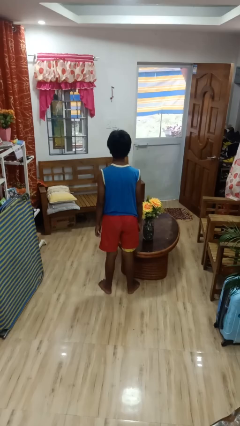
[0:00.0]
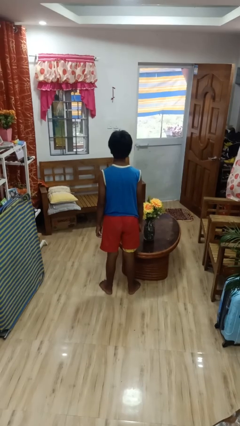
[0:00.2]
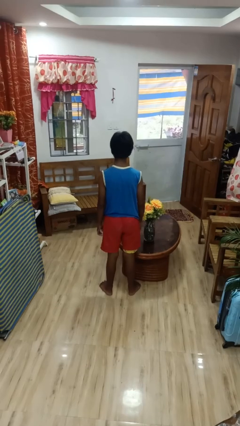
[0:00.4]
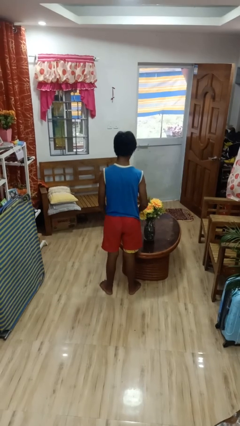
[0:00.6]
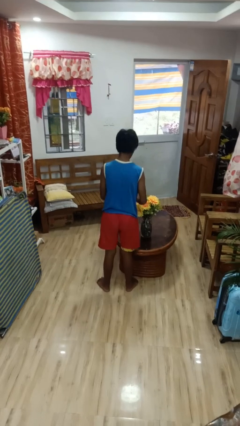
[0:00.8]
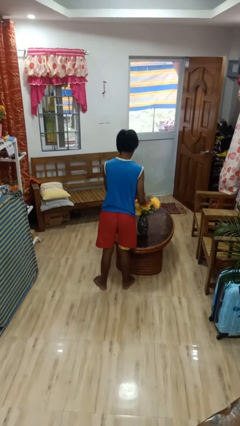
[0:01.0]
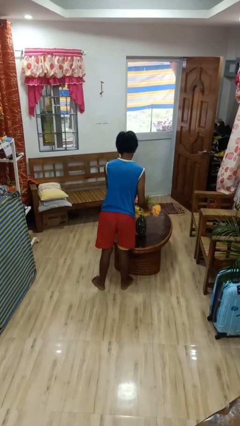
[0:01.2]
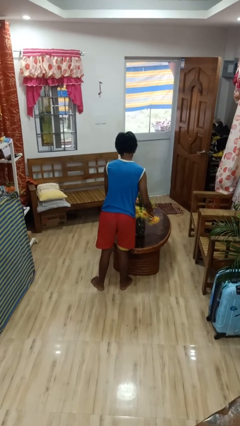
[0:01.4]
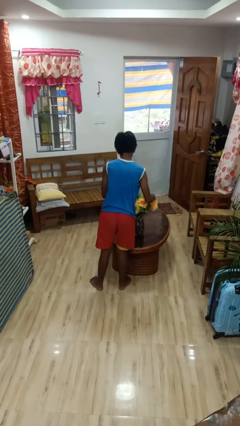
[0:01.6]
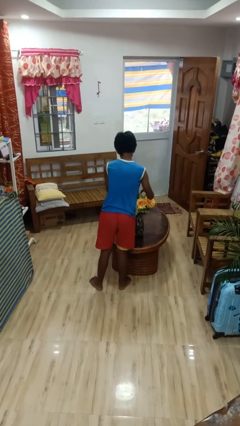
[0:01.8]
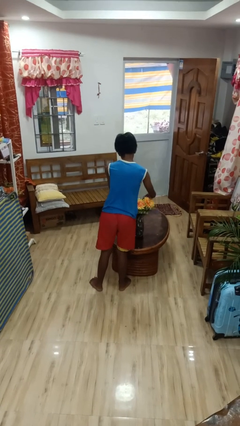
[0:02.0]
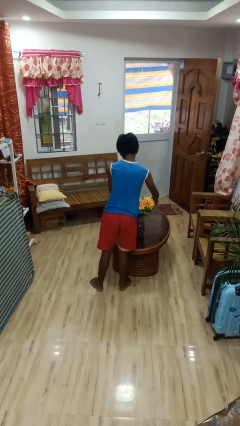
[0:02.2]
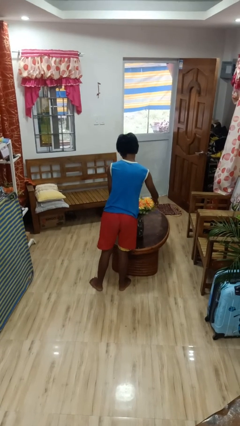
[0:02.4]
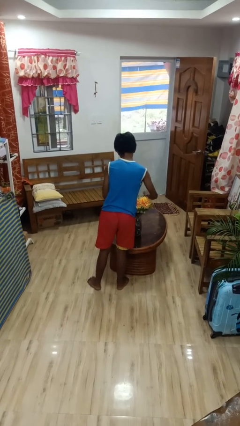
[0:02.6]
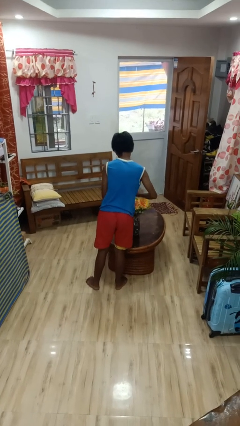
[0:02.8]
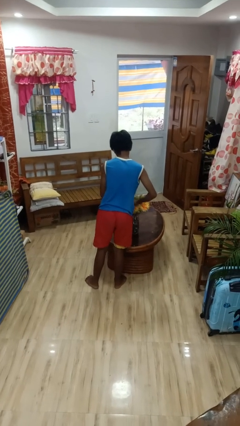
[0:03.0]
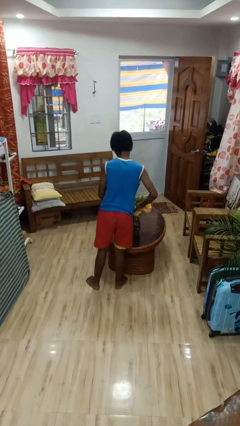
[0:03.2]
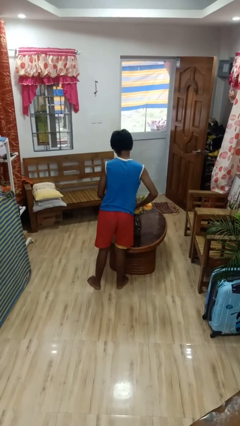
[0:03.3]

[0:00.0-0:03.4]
person arranges flowers in vase

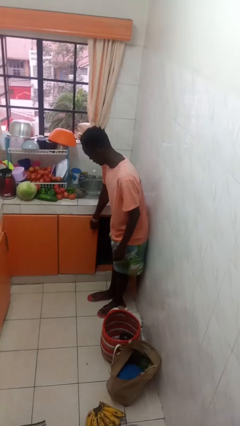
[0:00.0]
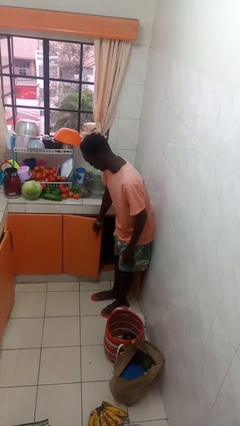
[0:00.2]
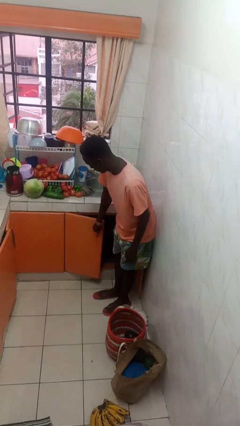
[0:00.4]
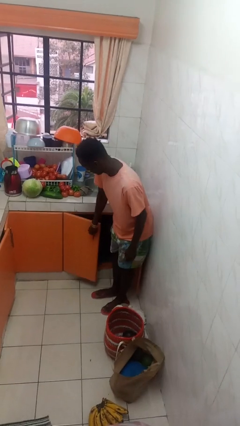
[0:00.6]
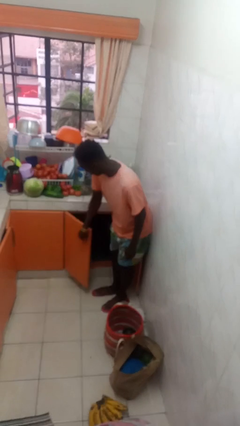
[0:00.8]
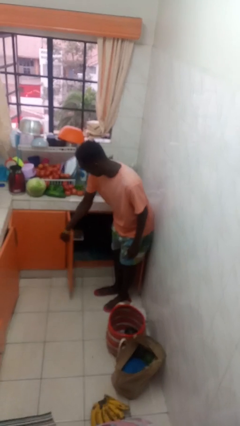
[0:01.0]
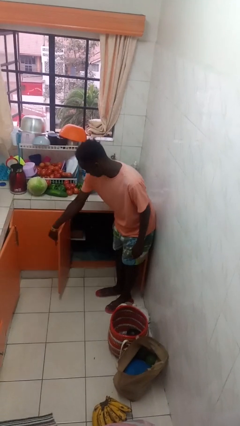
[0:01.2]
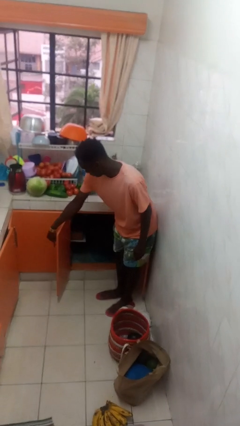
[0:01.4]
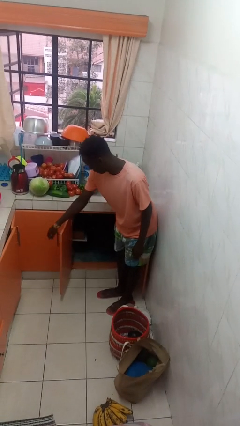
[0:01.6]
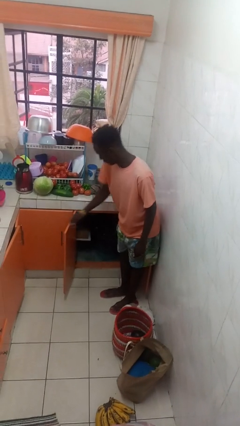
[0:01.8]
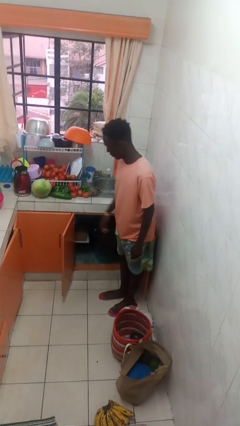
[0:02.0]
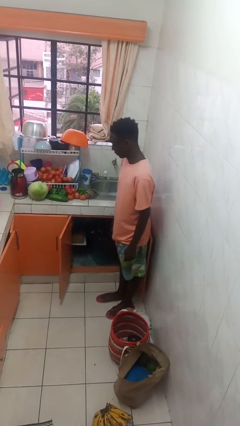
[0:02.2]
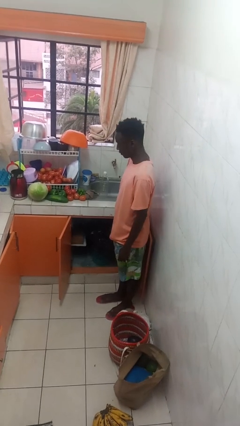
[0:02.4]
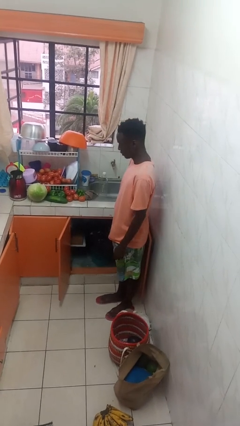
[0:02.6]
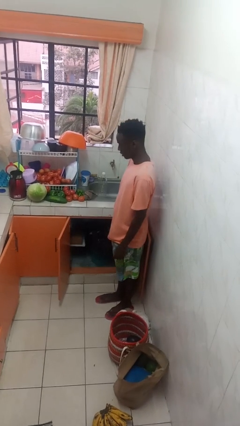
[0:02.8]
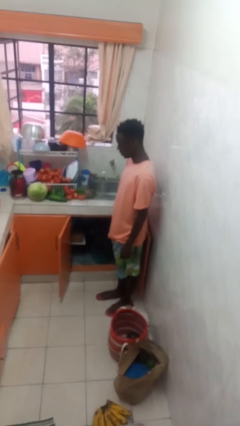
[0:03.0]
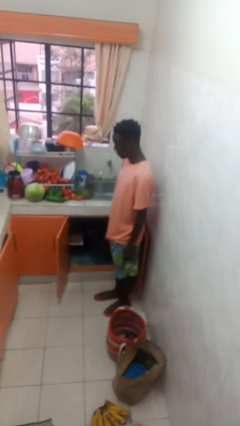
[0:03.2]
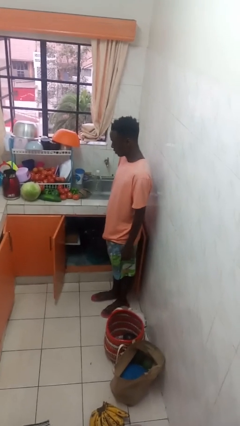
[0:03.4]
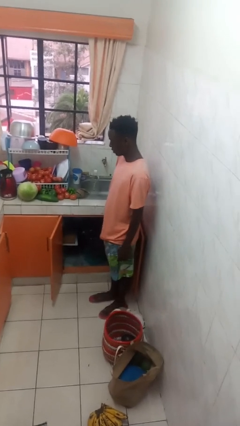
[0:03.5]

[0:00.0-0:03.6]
person opens cabinet

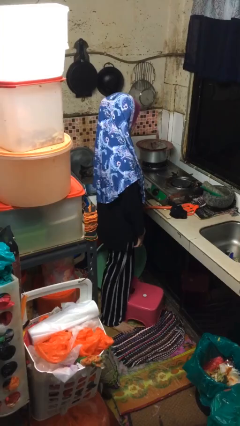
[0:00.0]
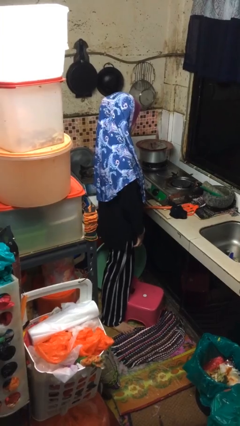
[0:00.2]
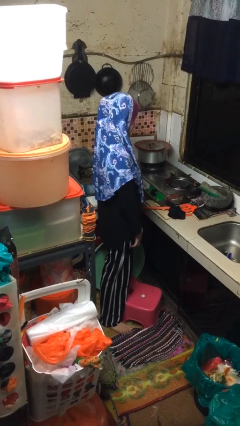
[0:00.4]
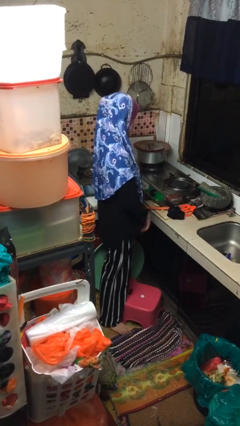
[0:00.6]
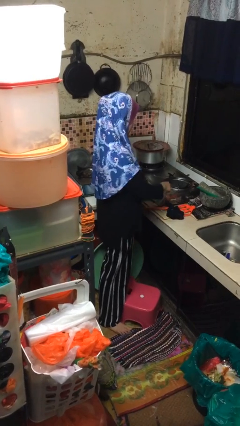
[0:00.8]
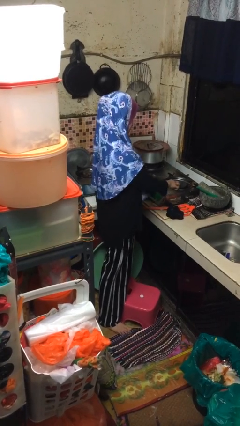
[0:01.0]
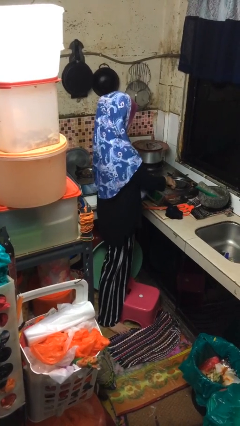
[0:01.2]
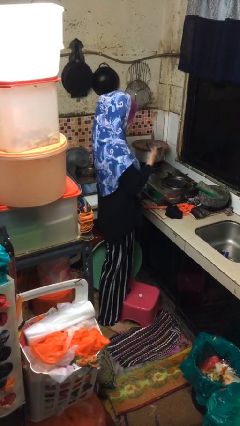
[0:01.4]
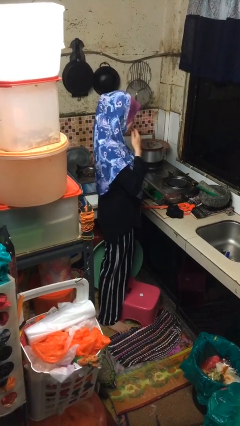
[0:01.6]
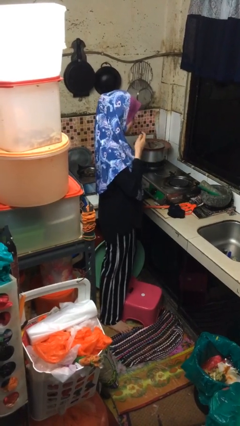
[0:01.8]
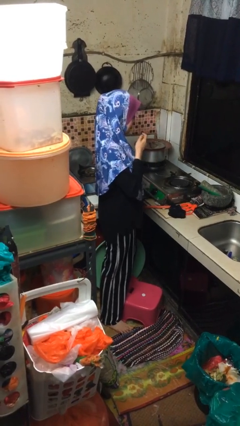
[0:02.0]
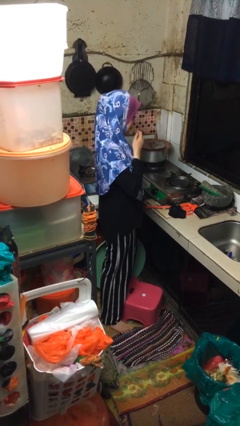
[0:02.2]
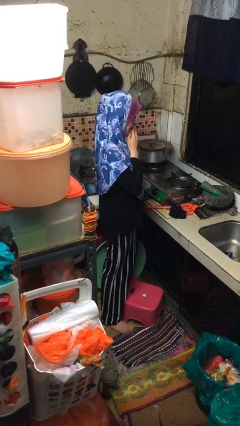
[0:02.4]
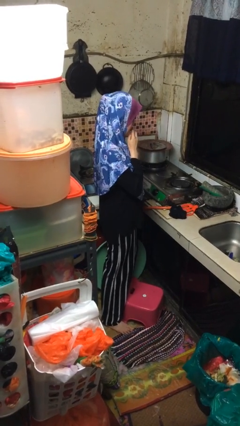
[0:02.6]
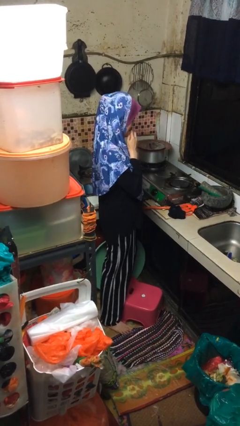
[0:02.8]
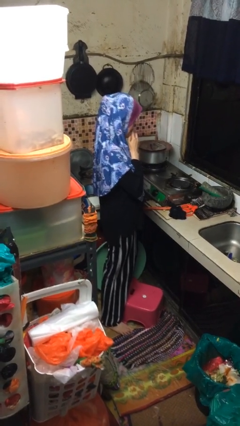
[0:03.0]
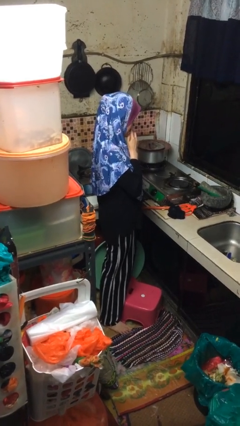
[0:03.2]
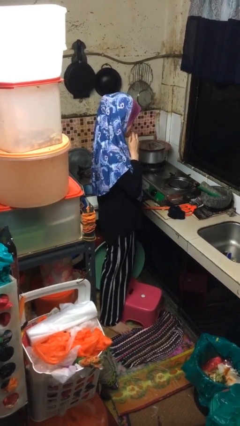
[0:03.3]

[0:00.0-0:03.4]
person burns hand

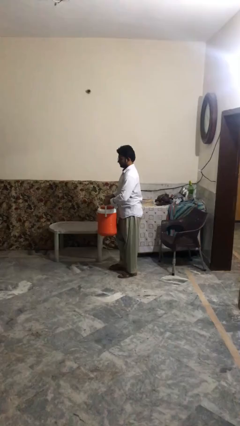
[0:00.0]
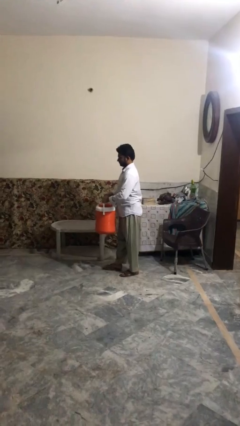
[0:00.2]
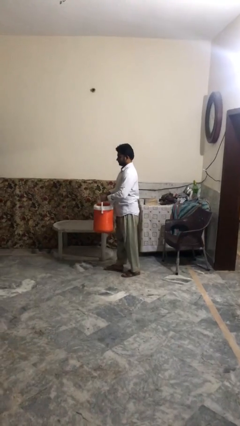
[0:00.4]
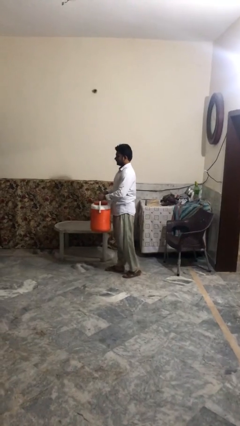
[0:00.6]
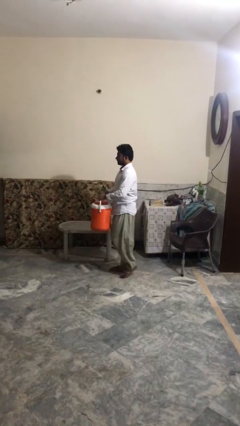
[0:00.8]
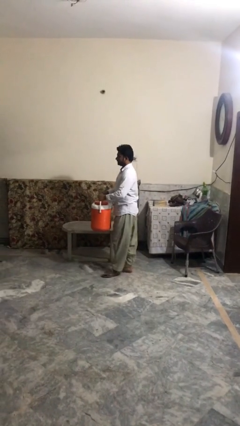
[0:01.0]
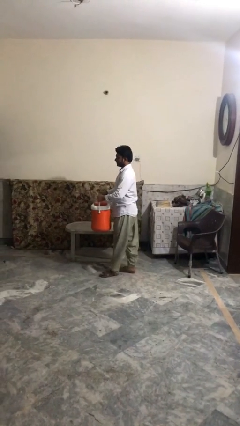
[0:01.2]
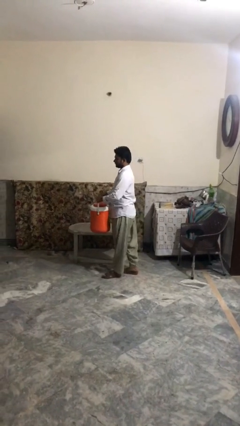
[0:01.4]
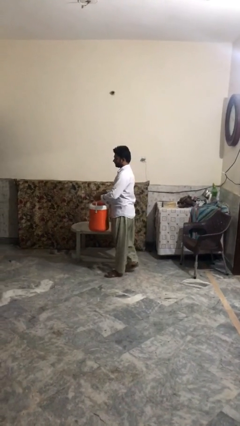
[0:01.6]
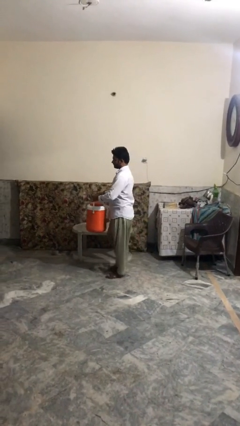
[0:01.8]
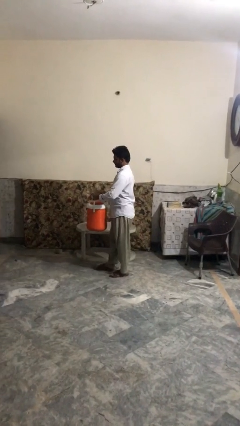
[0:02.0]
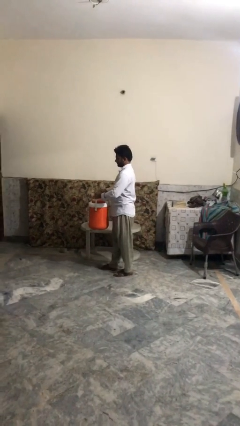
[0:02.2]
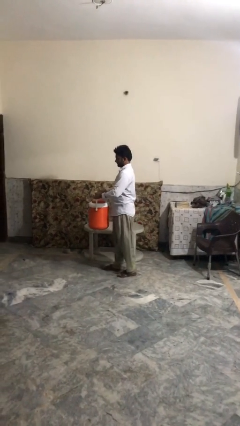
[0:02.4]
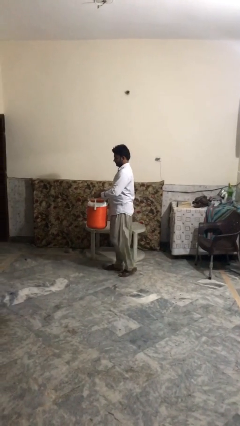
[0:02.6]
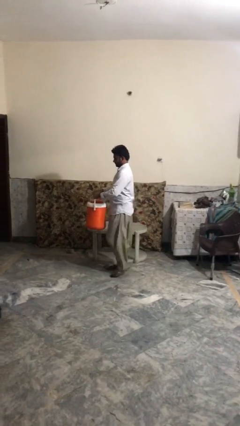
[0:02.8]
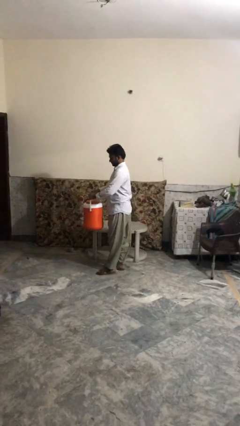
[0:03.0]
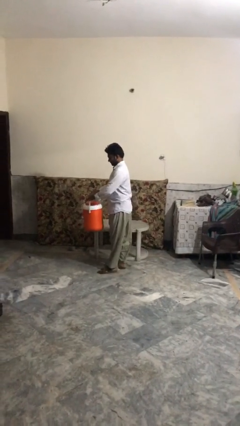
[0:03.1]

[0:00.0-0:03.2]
person carries heavy object

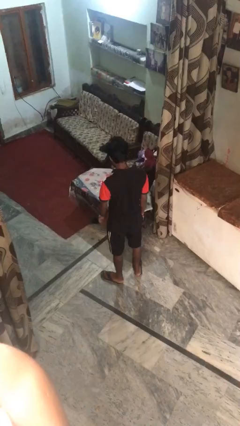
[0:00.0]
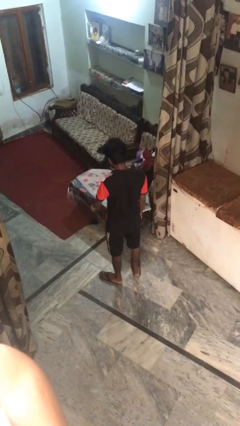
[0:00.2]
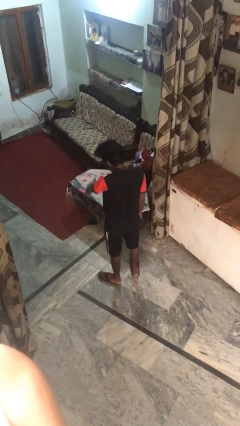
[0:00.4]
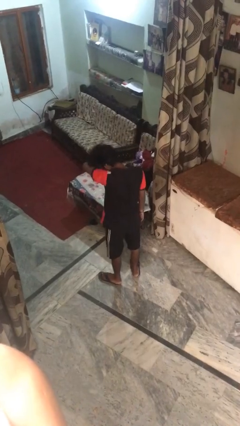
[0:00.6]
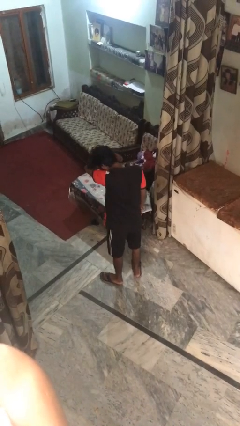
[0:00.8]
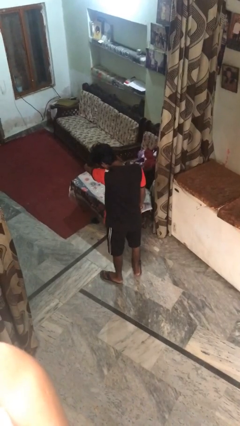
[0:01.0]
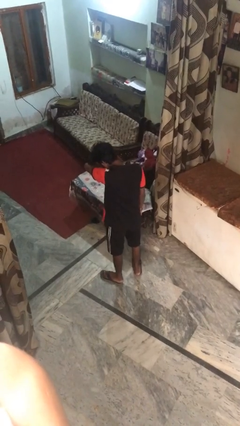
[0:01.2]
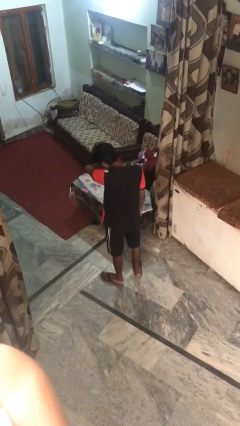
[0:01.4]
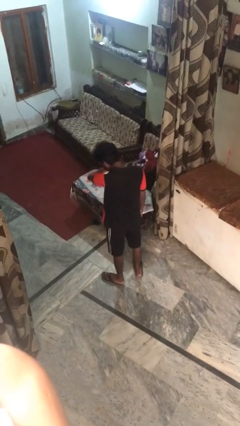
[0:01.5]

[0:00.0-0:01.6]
person sneezes into arm

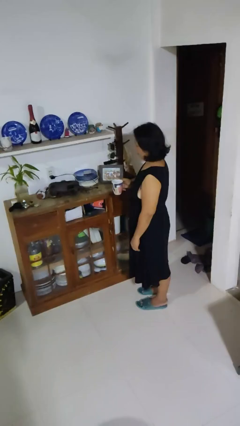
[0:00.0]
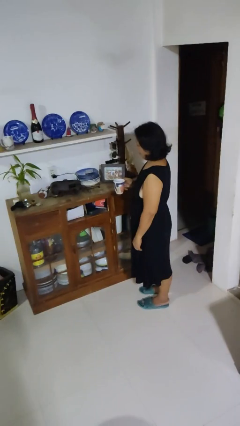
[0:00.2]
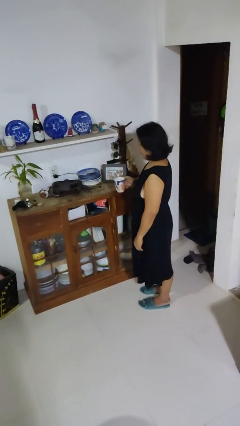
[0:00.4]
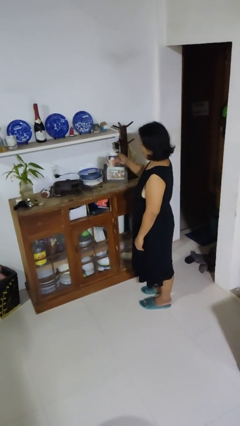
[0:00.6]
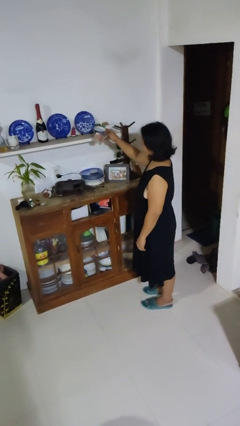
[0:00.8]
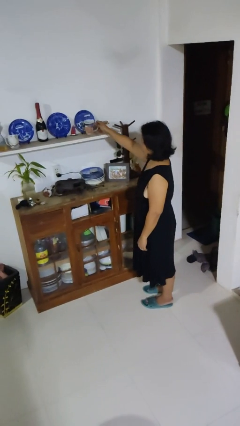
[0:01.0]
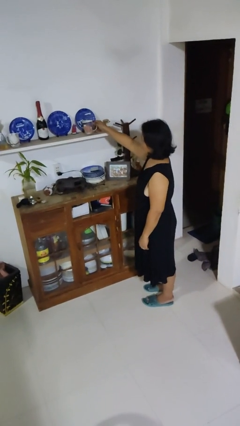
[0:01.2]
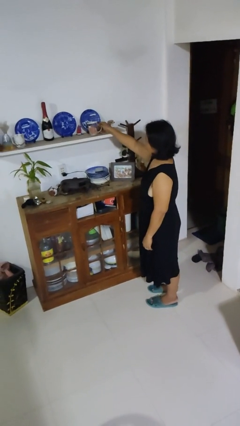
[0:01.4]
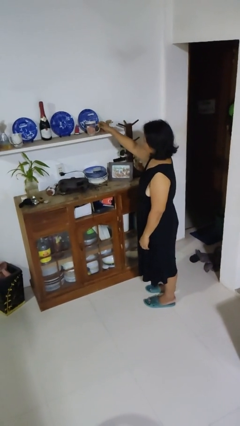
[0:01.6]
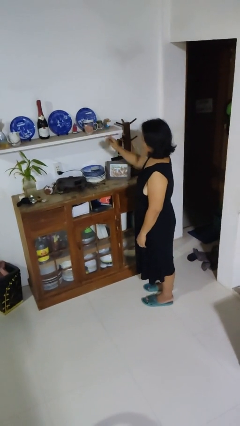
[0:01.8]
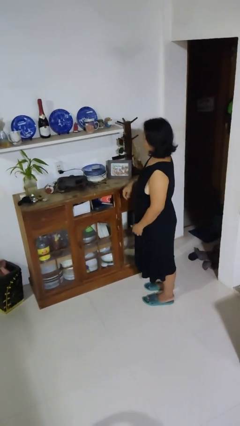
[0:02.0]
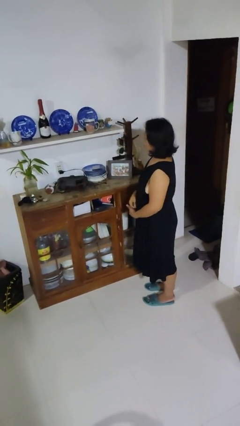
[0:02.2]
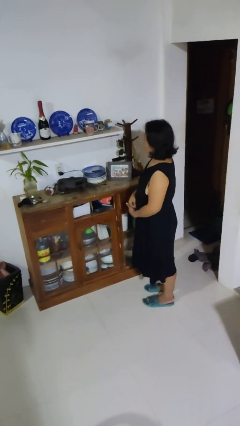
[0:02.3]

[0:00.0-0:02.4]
person puts down object on shelf
